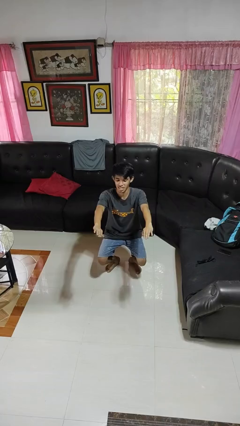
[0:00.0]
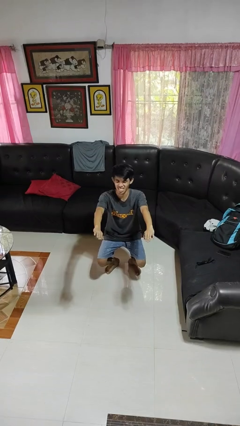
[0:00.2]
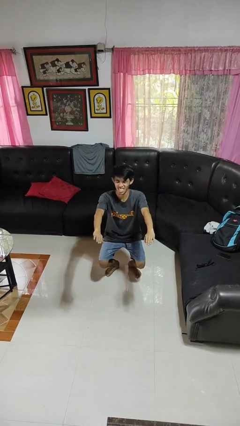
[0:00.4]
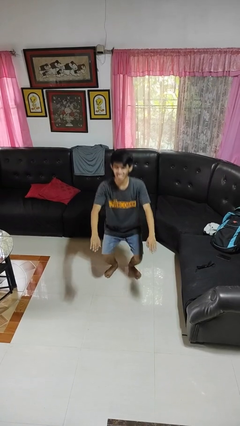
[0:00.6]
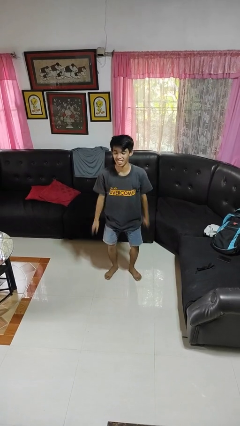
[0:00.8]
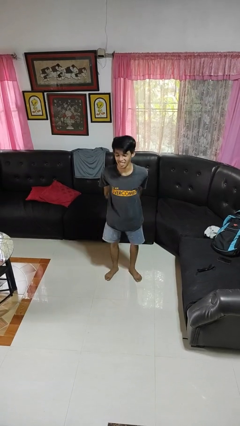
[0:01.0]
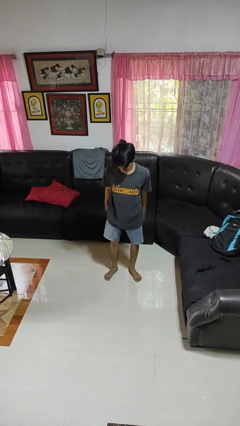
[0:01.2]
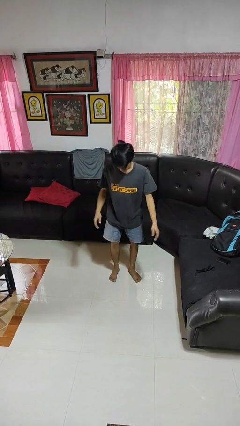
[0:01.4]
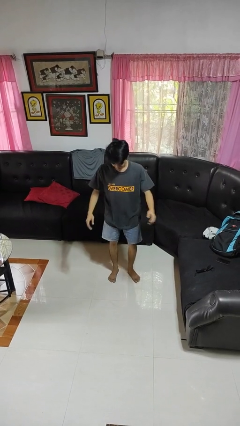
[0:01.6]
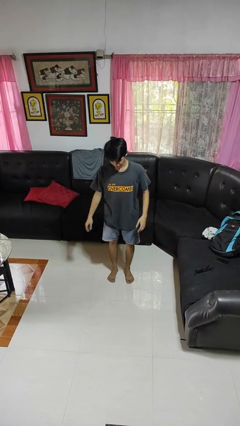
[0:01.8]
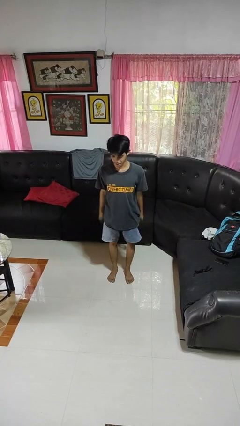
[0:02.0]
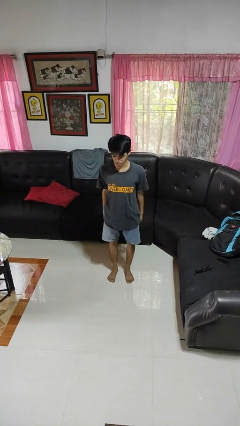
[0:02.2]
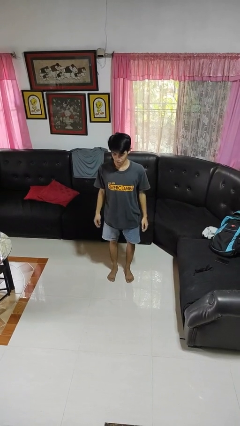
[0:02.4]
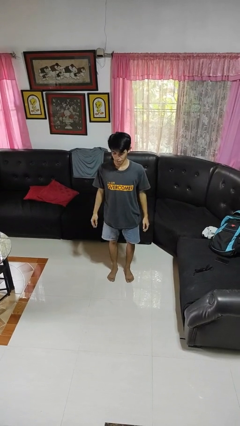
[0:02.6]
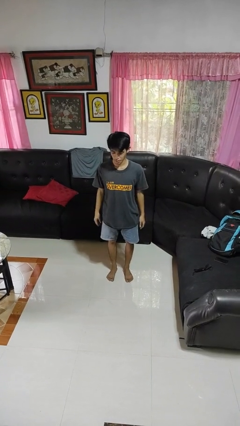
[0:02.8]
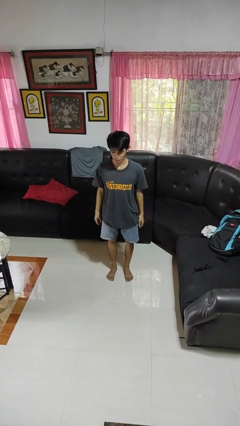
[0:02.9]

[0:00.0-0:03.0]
person stands up

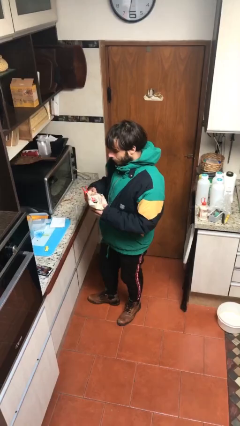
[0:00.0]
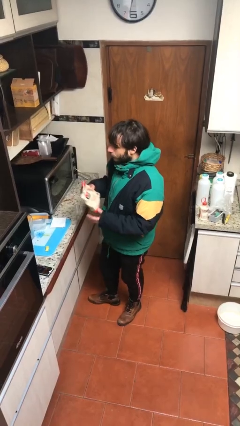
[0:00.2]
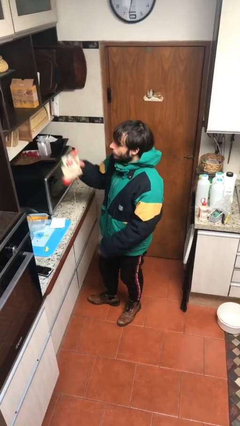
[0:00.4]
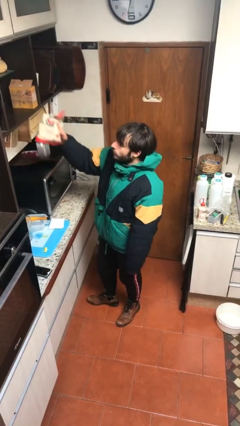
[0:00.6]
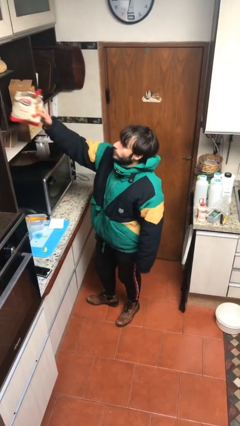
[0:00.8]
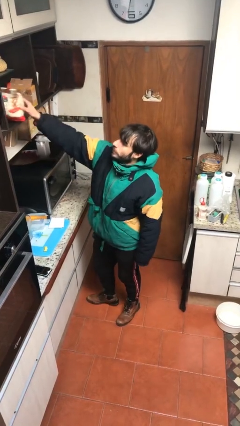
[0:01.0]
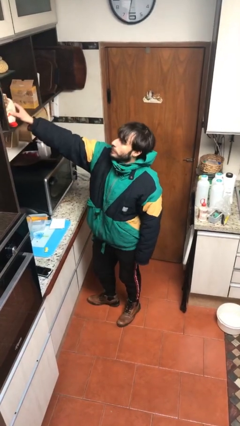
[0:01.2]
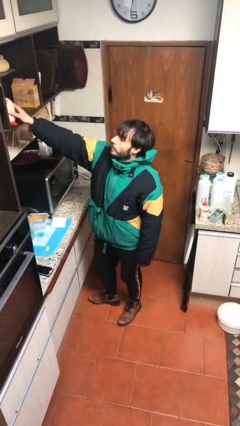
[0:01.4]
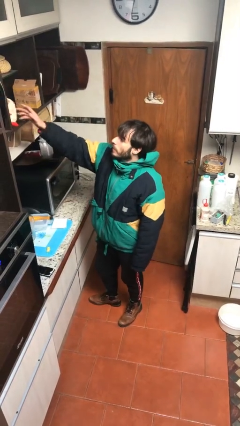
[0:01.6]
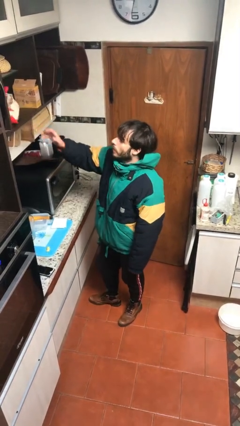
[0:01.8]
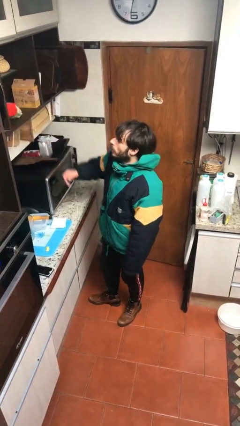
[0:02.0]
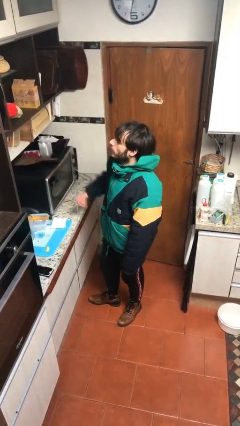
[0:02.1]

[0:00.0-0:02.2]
person puts down object into cabinet

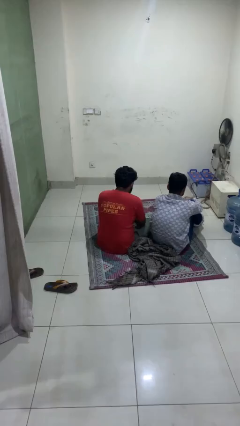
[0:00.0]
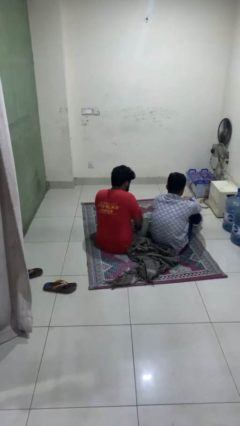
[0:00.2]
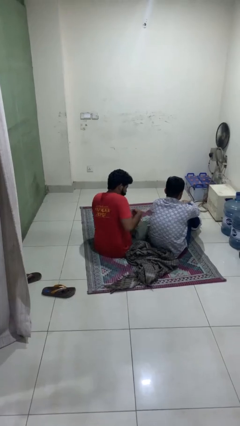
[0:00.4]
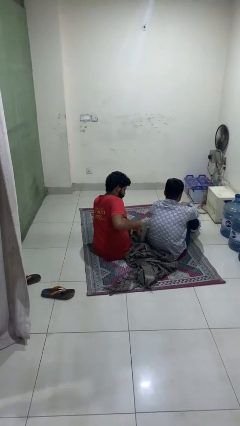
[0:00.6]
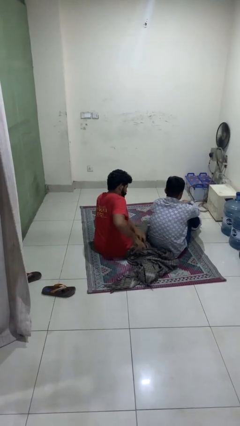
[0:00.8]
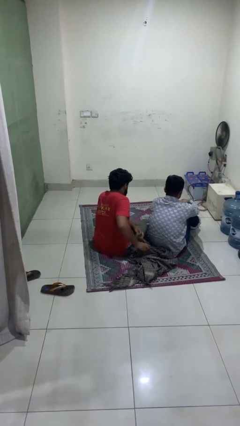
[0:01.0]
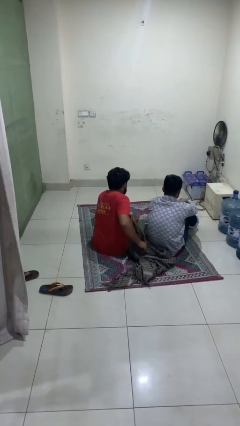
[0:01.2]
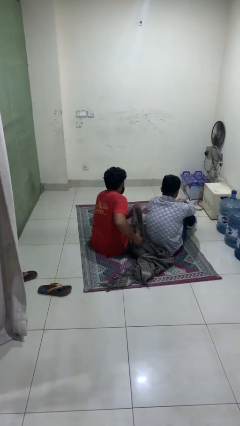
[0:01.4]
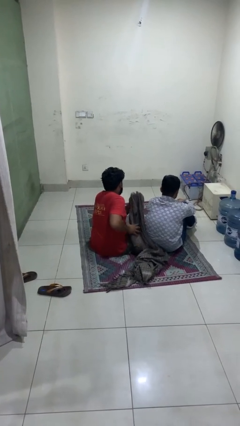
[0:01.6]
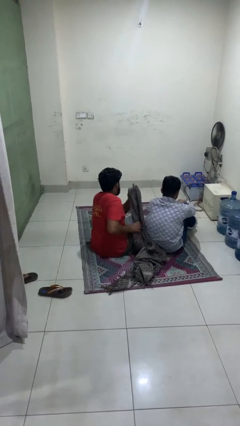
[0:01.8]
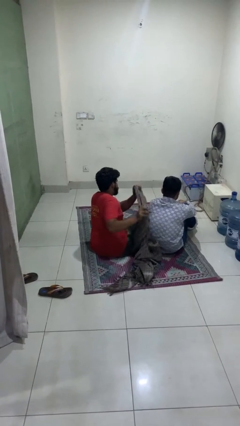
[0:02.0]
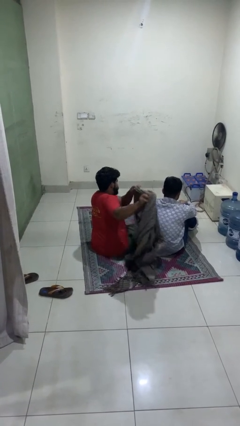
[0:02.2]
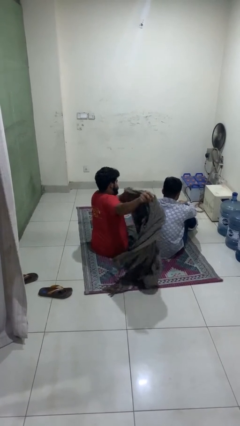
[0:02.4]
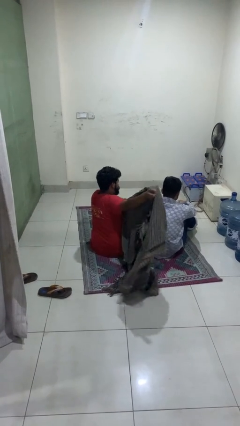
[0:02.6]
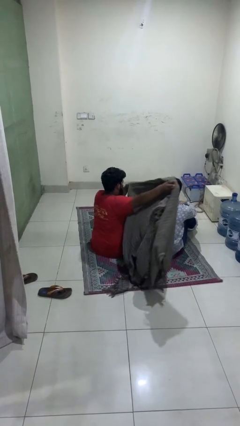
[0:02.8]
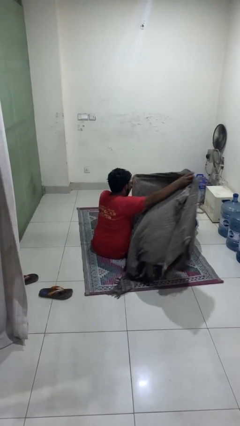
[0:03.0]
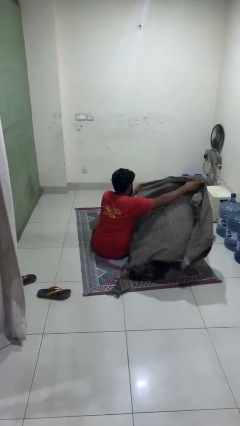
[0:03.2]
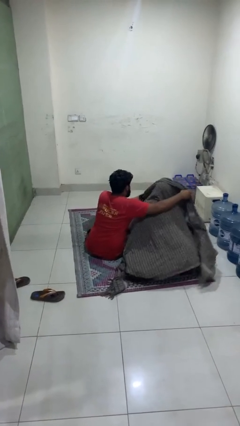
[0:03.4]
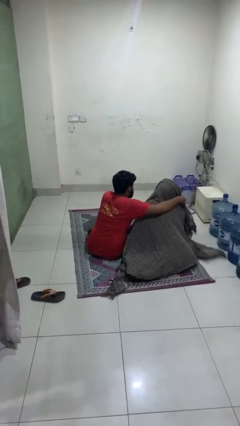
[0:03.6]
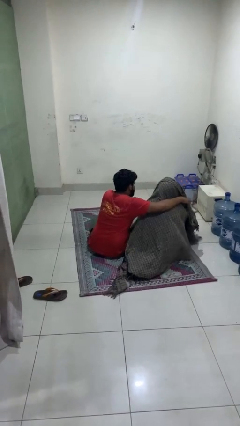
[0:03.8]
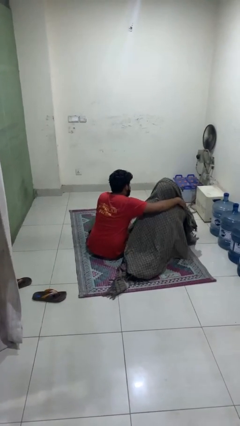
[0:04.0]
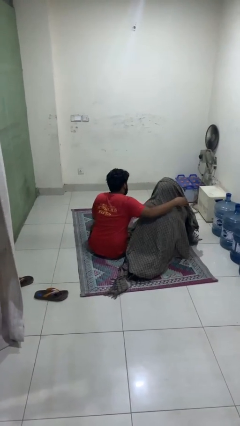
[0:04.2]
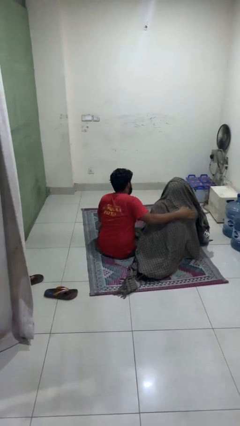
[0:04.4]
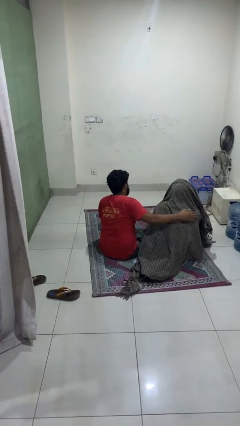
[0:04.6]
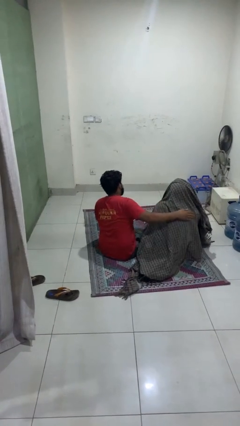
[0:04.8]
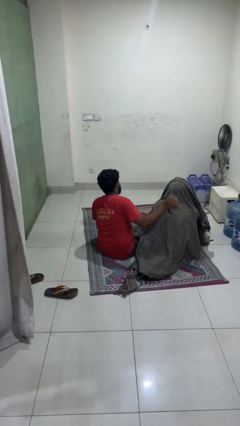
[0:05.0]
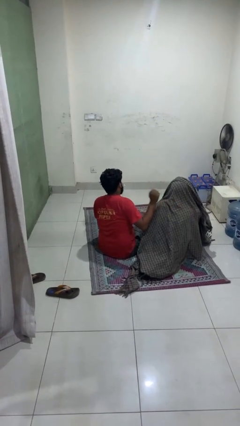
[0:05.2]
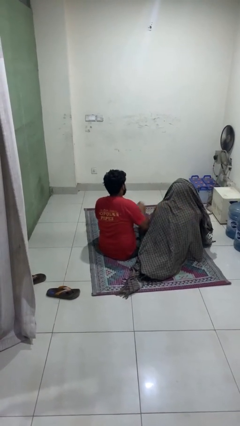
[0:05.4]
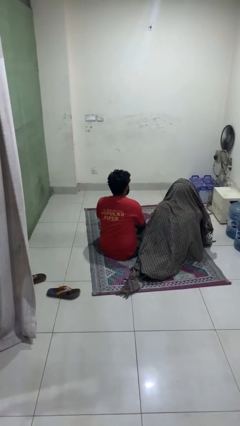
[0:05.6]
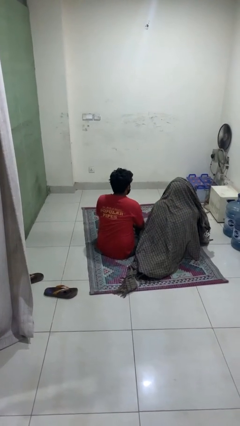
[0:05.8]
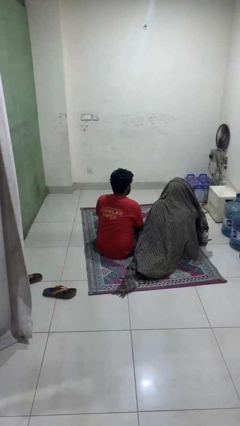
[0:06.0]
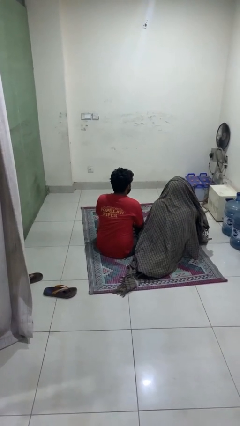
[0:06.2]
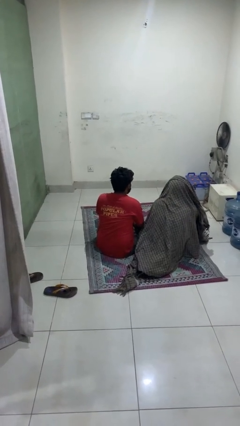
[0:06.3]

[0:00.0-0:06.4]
person covers friend with blanket

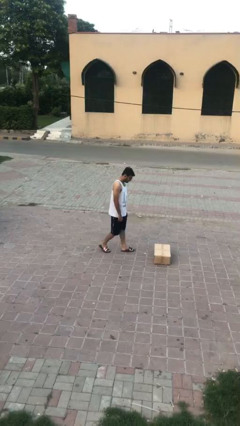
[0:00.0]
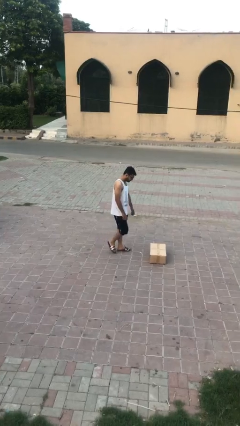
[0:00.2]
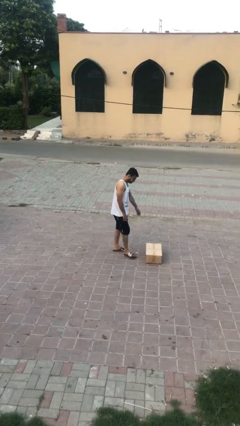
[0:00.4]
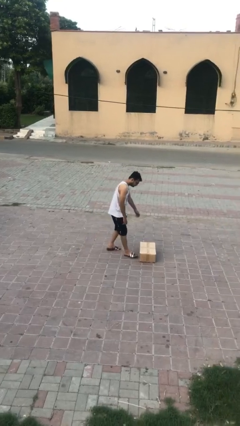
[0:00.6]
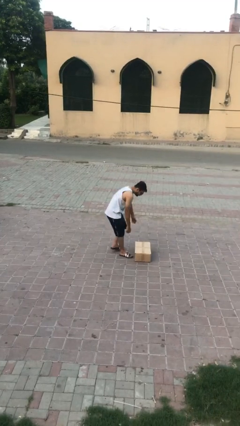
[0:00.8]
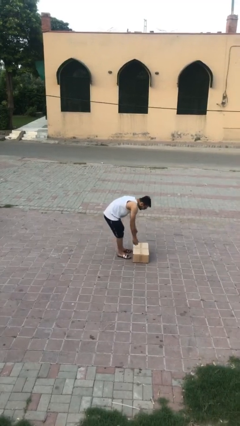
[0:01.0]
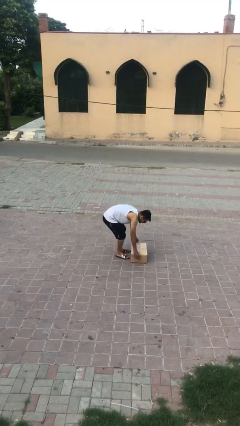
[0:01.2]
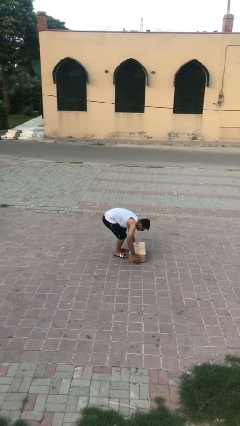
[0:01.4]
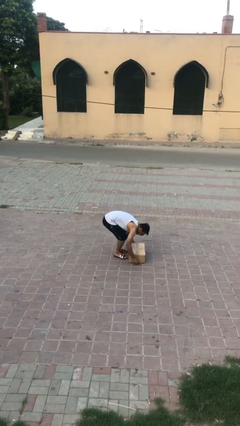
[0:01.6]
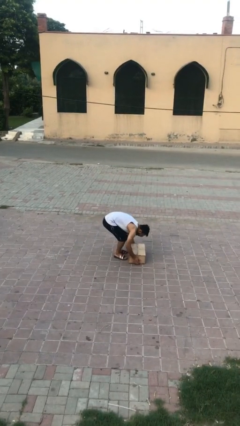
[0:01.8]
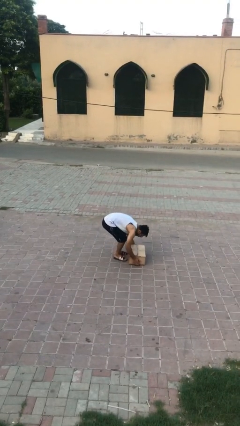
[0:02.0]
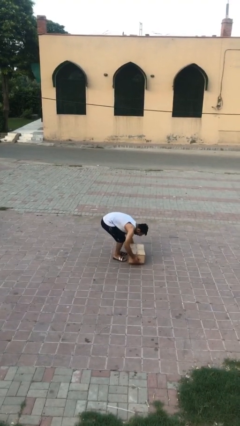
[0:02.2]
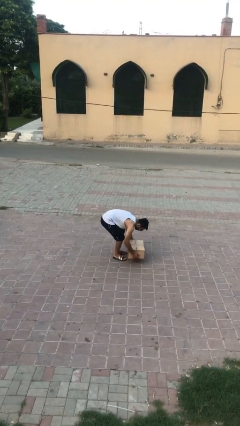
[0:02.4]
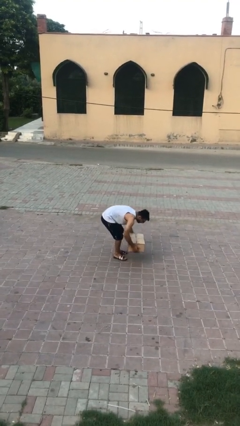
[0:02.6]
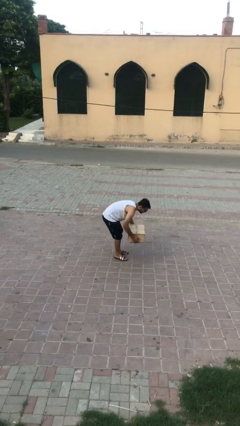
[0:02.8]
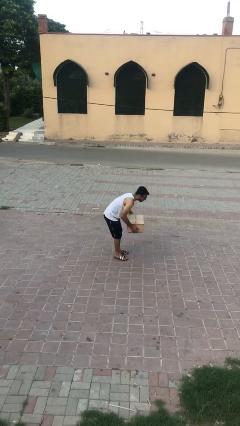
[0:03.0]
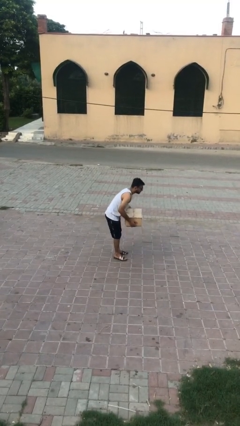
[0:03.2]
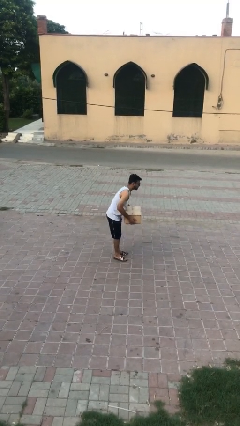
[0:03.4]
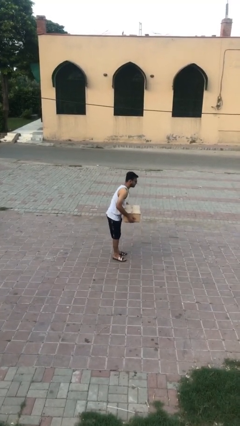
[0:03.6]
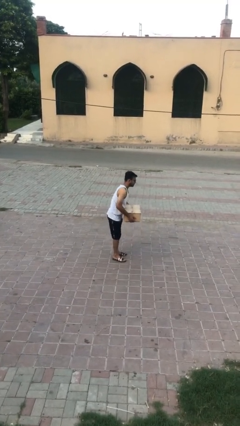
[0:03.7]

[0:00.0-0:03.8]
person picks up object from floor

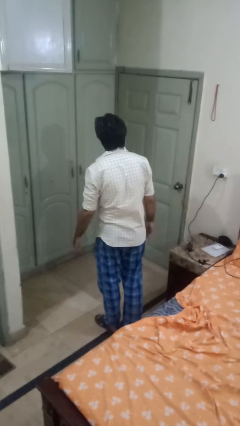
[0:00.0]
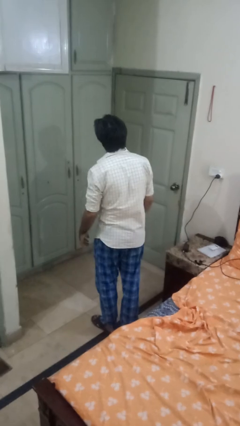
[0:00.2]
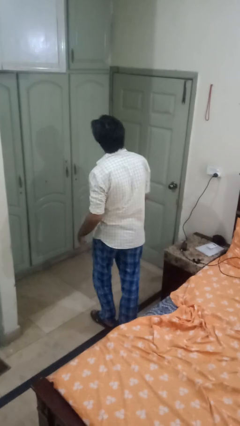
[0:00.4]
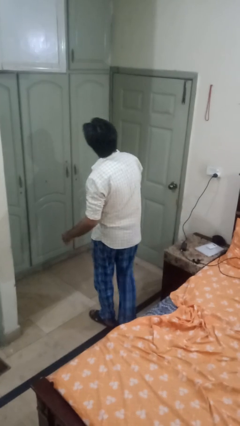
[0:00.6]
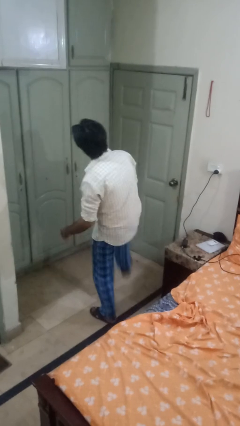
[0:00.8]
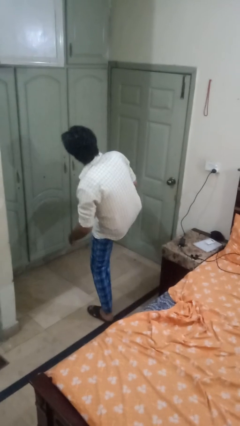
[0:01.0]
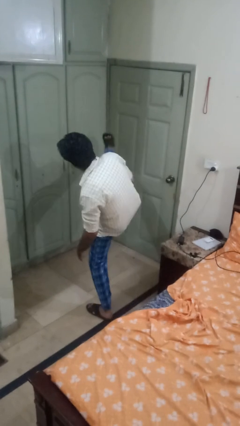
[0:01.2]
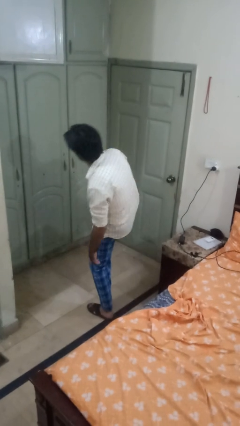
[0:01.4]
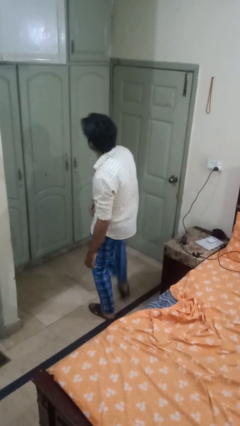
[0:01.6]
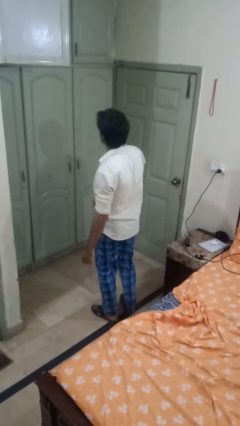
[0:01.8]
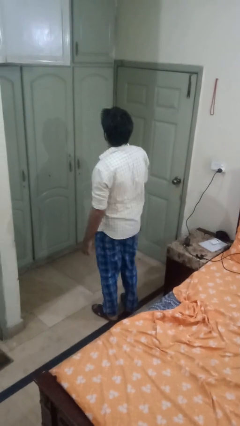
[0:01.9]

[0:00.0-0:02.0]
person karate kicks

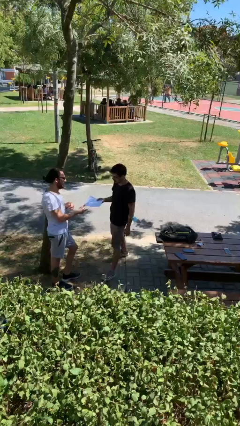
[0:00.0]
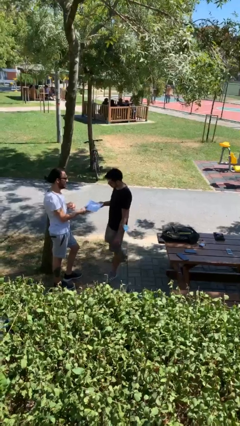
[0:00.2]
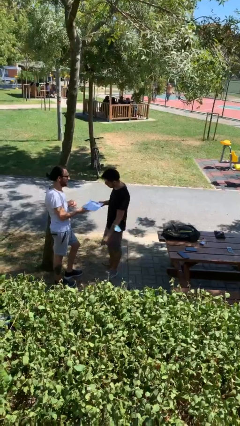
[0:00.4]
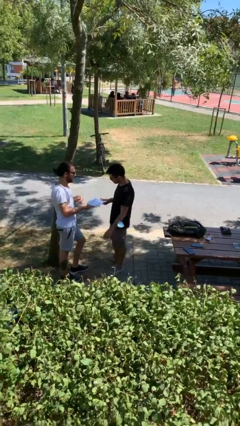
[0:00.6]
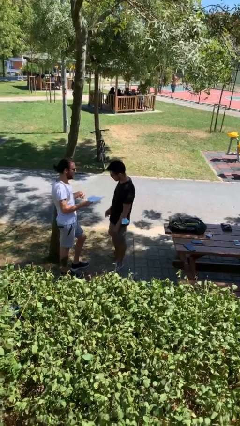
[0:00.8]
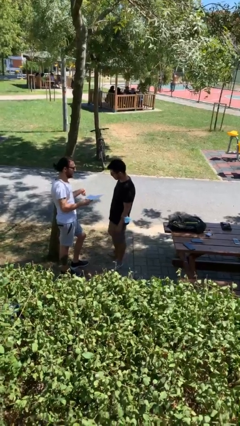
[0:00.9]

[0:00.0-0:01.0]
person transfers object to person
